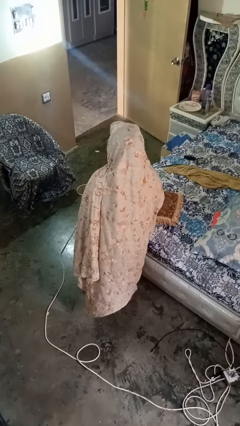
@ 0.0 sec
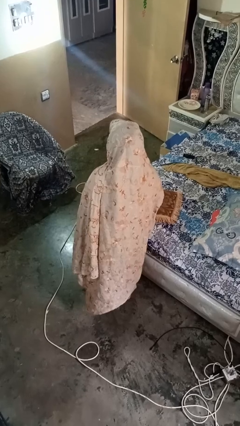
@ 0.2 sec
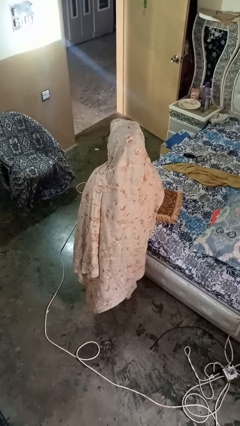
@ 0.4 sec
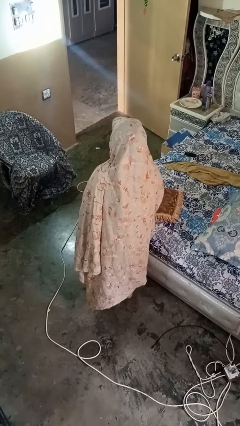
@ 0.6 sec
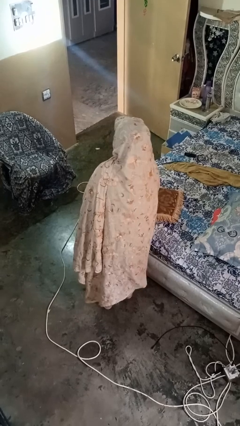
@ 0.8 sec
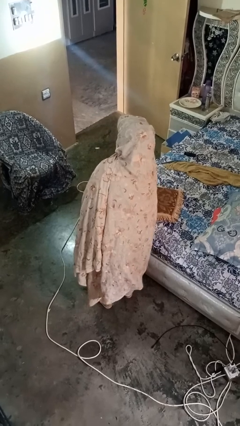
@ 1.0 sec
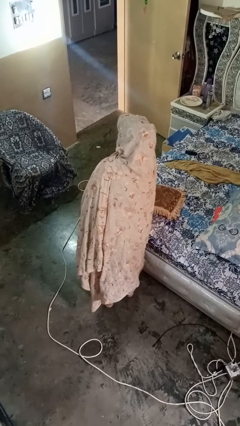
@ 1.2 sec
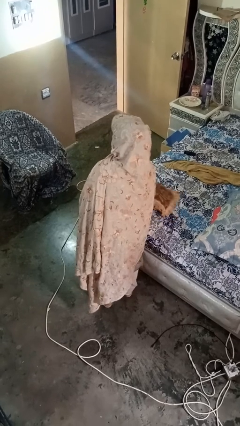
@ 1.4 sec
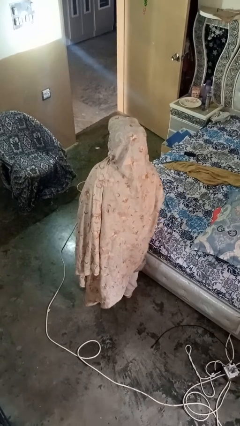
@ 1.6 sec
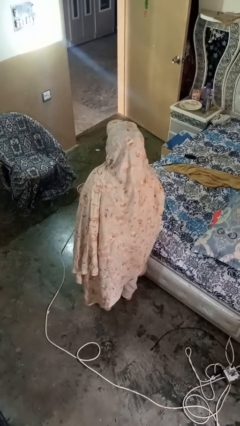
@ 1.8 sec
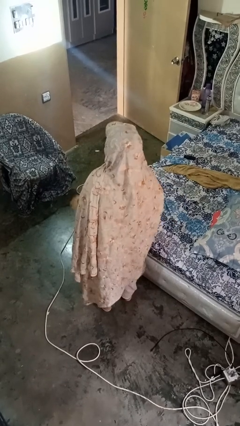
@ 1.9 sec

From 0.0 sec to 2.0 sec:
person picks up object from bed

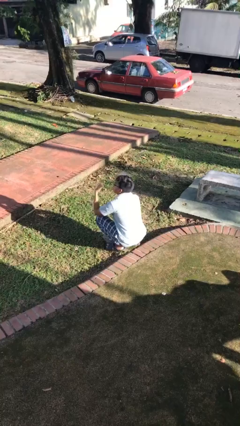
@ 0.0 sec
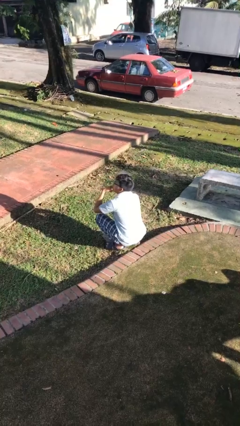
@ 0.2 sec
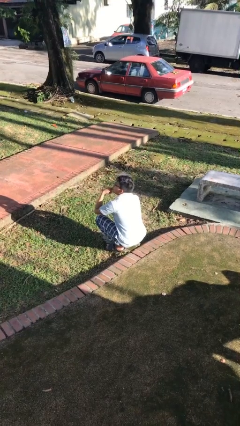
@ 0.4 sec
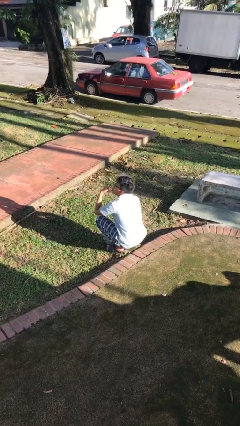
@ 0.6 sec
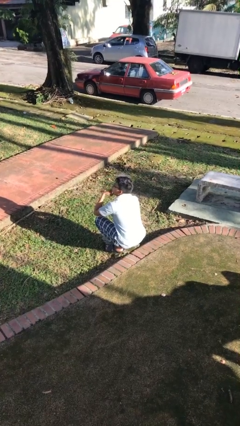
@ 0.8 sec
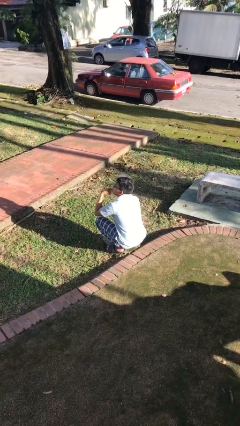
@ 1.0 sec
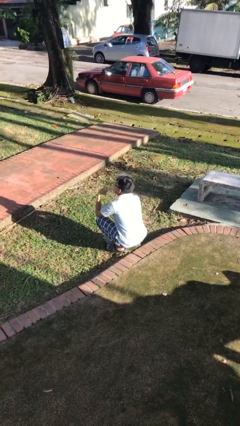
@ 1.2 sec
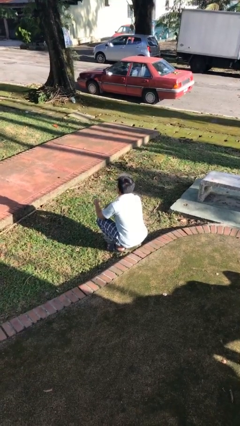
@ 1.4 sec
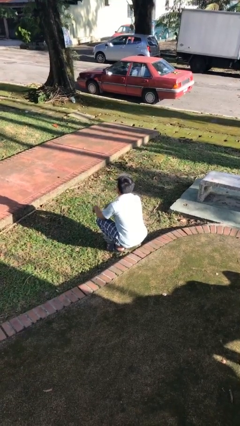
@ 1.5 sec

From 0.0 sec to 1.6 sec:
person strokes chin

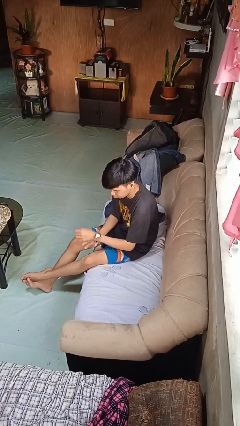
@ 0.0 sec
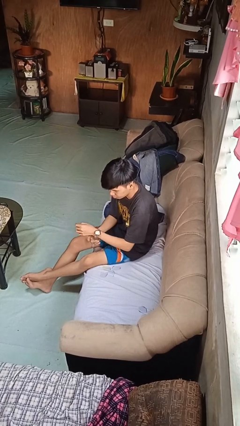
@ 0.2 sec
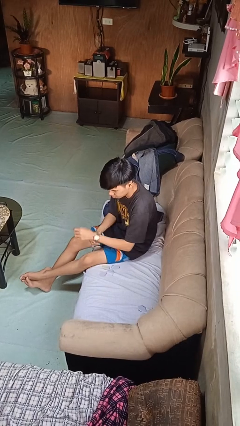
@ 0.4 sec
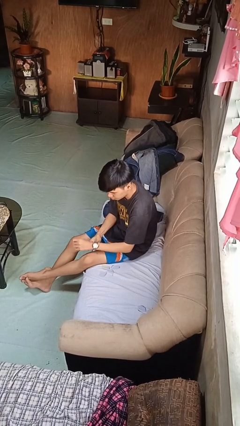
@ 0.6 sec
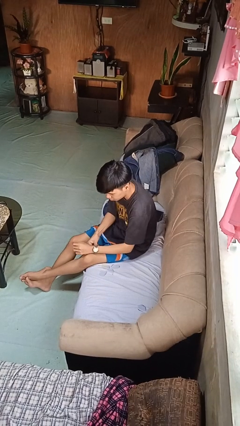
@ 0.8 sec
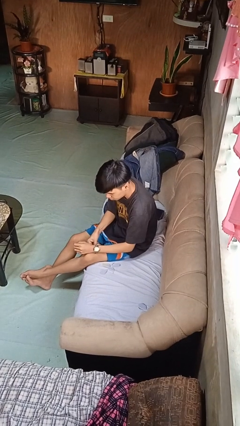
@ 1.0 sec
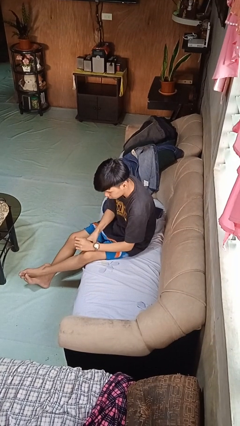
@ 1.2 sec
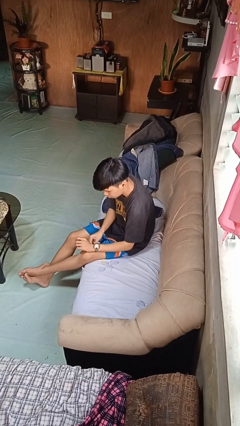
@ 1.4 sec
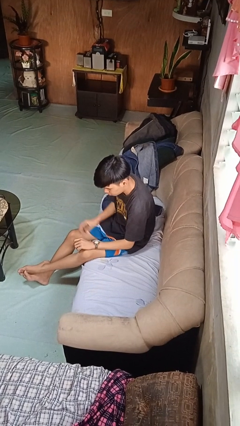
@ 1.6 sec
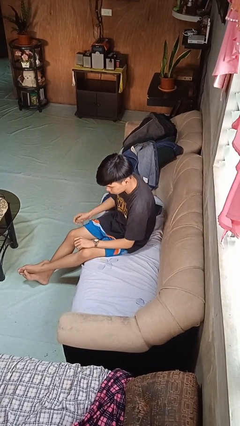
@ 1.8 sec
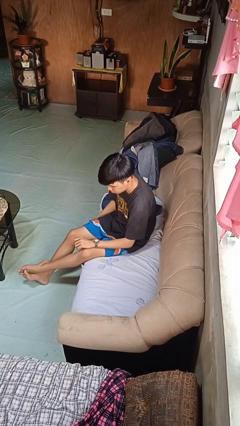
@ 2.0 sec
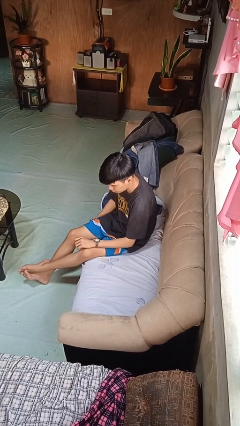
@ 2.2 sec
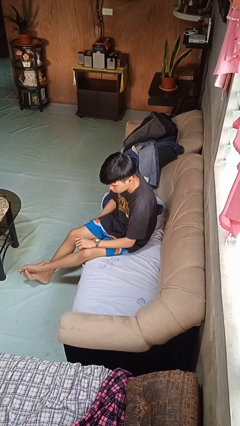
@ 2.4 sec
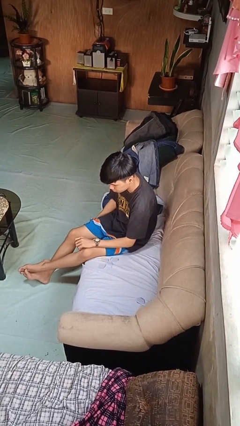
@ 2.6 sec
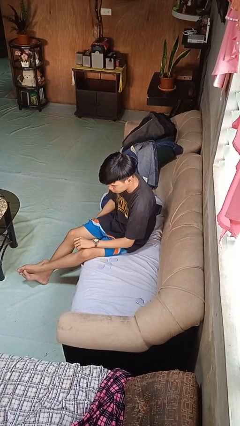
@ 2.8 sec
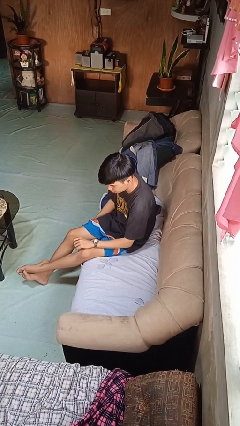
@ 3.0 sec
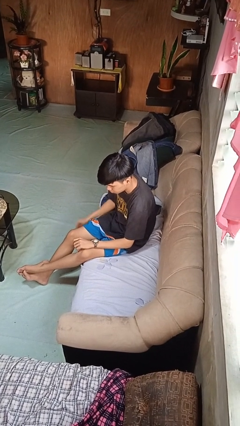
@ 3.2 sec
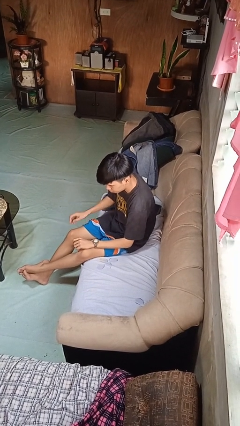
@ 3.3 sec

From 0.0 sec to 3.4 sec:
person puts on wristwatch

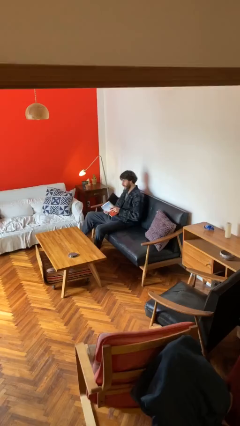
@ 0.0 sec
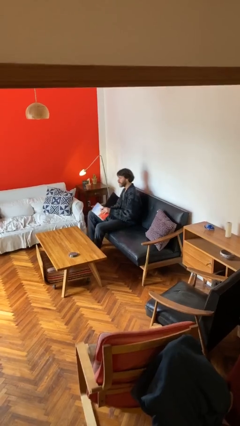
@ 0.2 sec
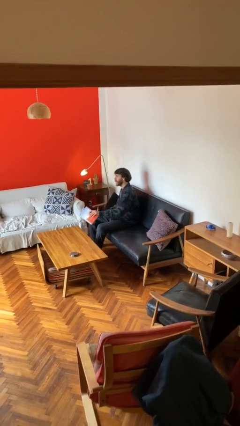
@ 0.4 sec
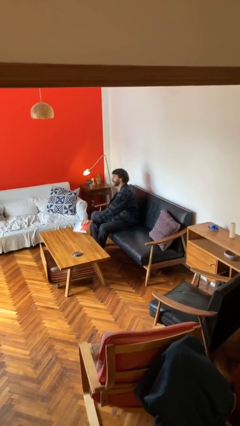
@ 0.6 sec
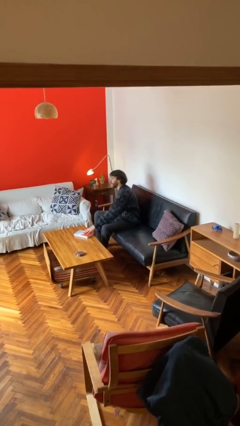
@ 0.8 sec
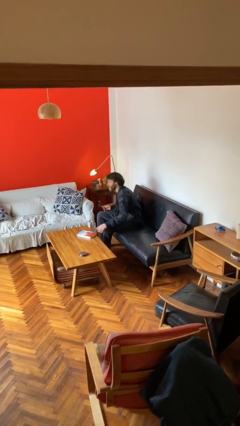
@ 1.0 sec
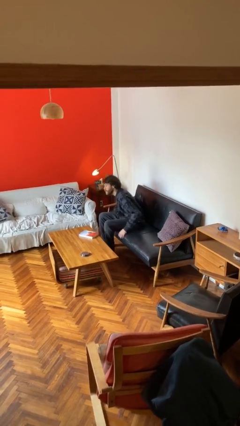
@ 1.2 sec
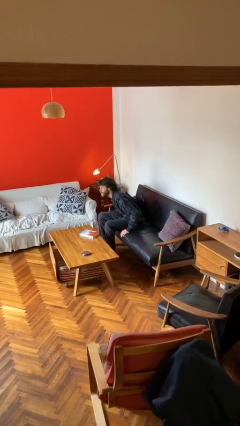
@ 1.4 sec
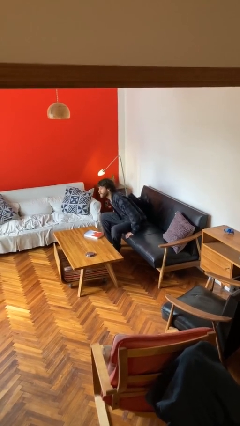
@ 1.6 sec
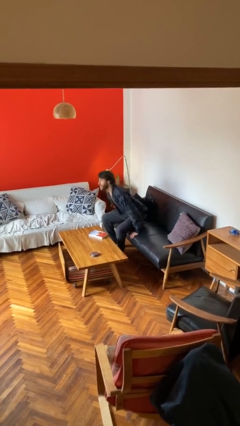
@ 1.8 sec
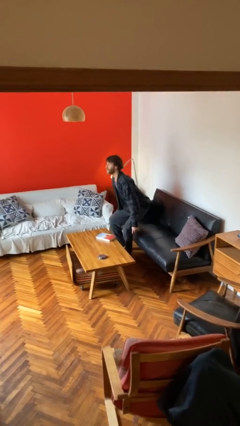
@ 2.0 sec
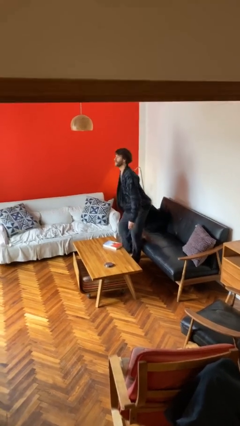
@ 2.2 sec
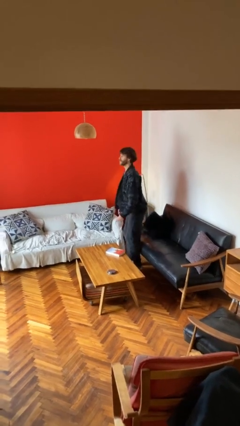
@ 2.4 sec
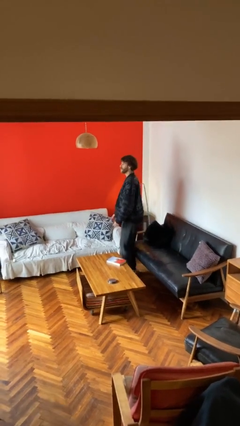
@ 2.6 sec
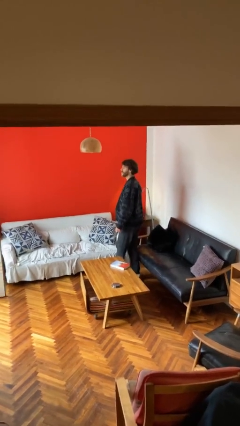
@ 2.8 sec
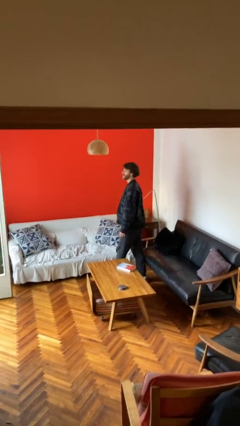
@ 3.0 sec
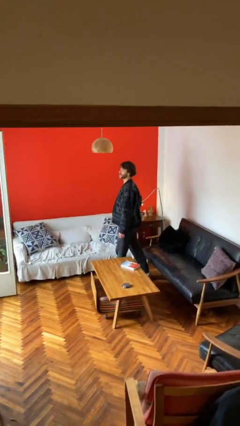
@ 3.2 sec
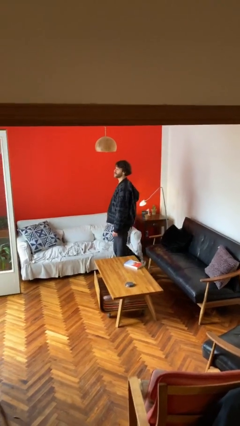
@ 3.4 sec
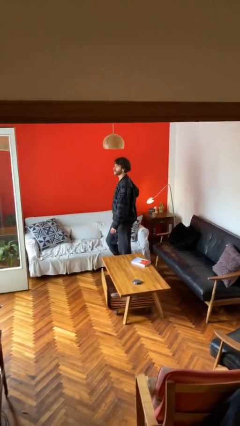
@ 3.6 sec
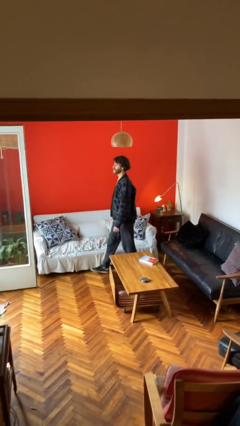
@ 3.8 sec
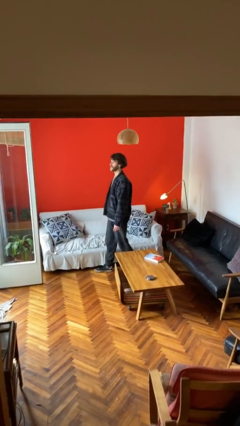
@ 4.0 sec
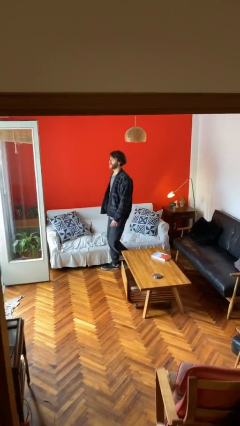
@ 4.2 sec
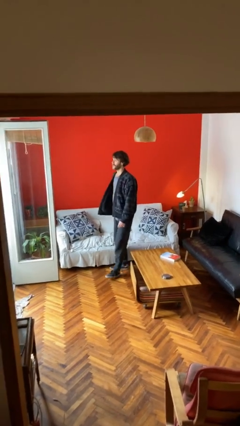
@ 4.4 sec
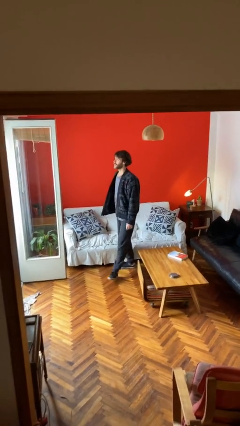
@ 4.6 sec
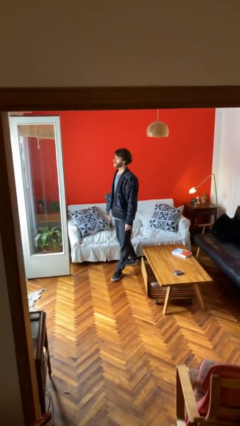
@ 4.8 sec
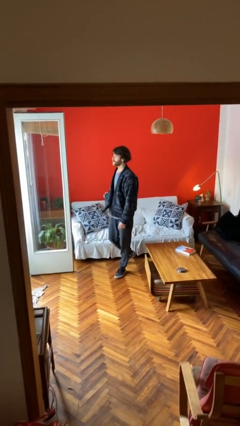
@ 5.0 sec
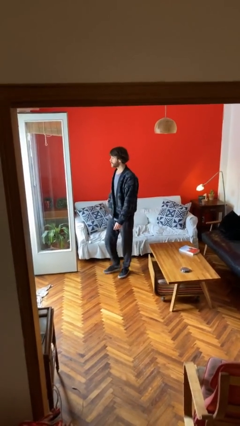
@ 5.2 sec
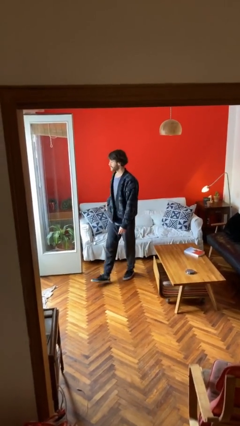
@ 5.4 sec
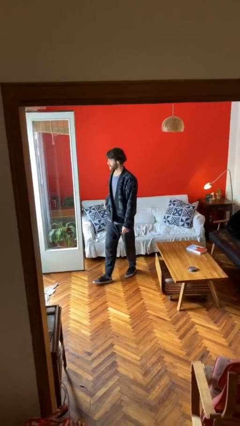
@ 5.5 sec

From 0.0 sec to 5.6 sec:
person stands up

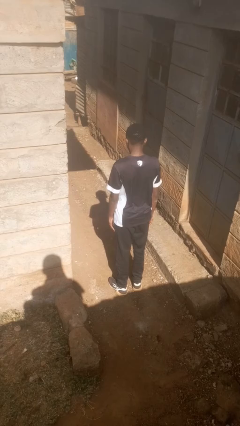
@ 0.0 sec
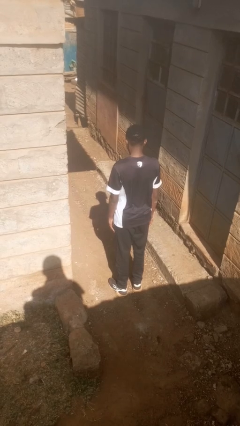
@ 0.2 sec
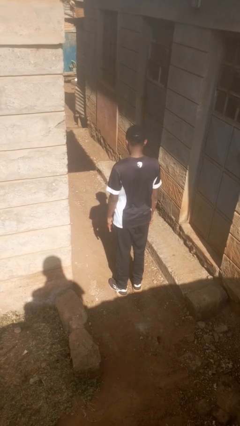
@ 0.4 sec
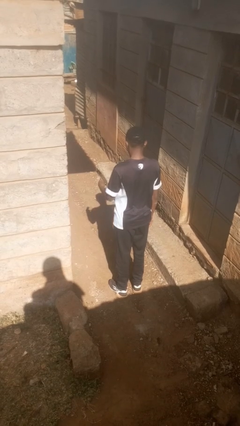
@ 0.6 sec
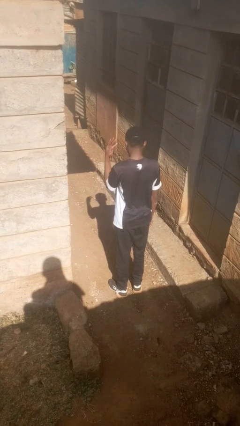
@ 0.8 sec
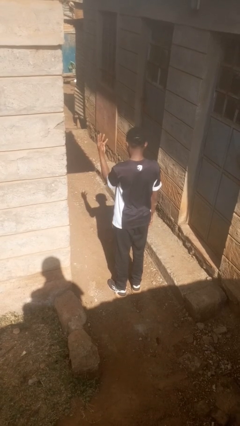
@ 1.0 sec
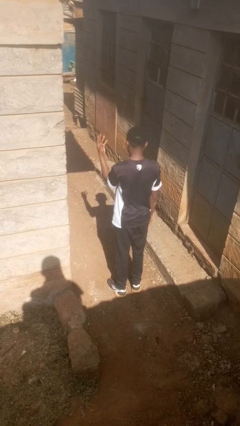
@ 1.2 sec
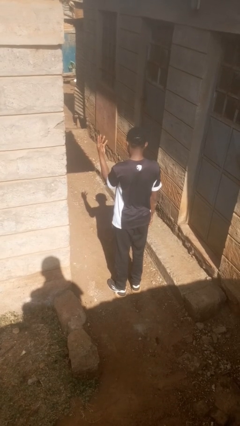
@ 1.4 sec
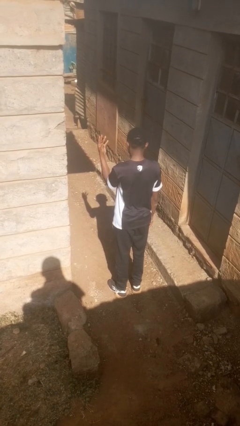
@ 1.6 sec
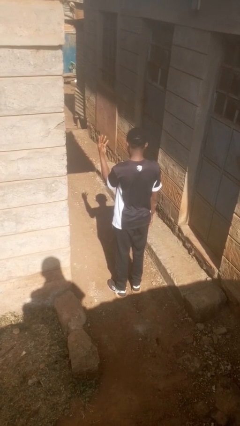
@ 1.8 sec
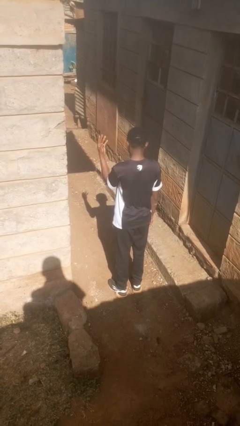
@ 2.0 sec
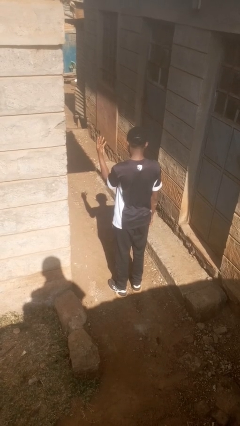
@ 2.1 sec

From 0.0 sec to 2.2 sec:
person gestures number four

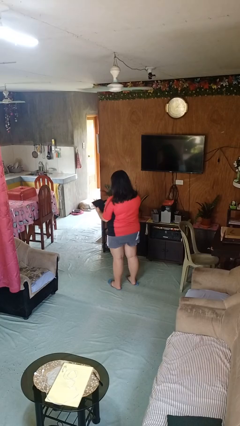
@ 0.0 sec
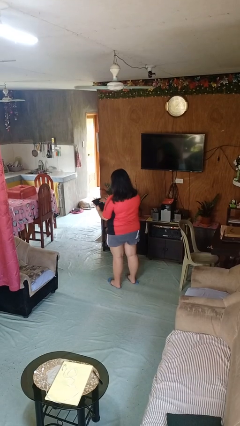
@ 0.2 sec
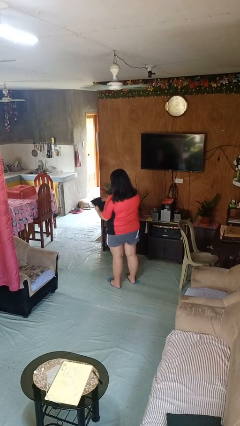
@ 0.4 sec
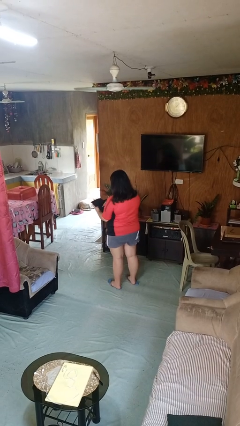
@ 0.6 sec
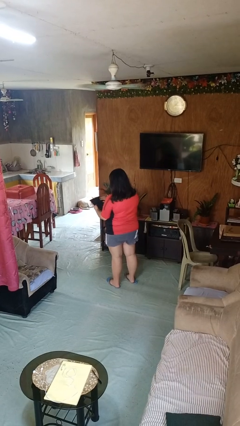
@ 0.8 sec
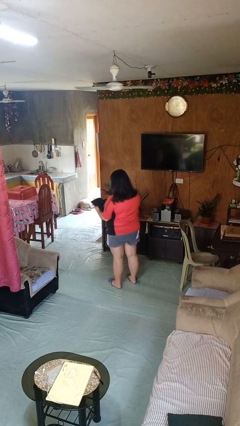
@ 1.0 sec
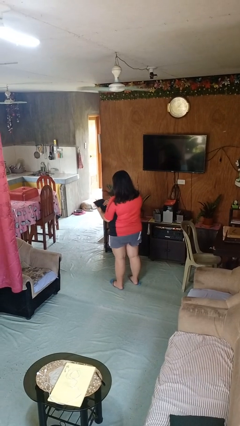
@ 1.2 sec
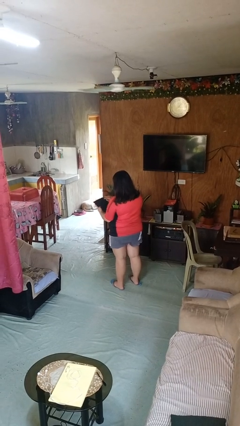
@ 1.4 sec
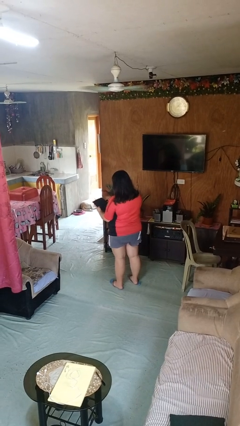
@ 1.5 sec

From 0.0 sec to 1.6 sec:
person interacts with tablet

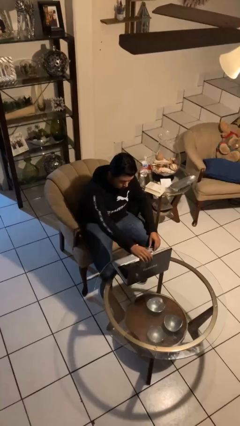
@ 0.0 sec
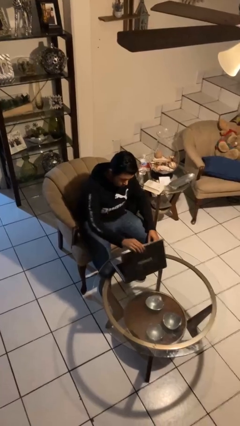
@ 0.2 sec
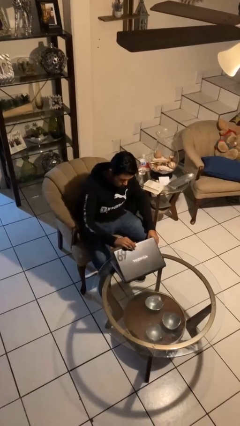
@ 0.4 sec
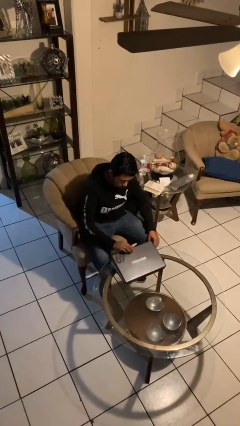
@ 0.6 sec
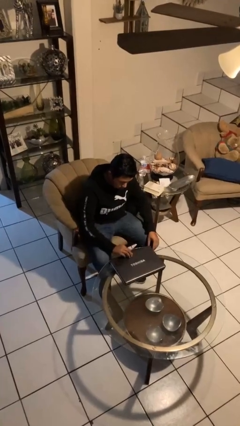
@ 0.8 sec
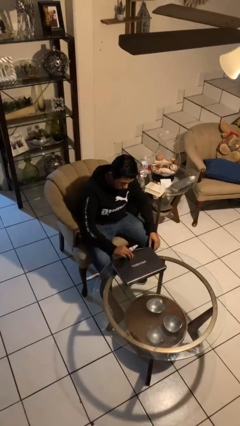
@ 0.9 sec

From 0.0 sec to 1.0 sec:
person closes laptop
